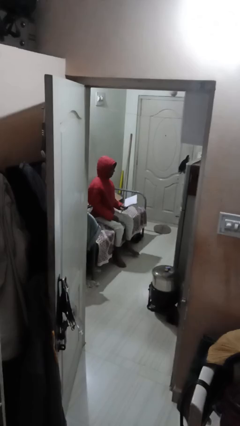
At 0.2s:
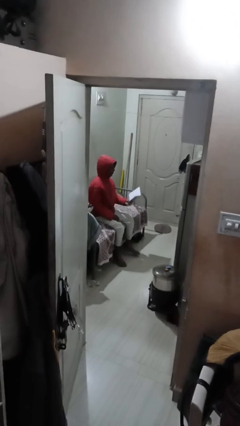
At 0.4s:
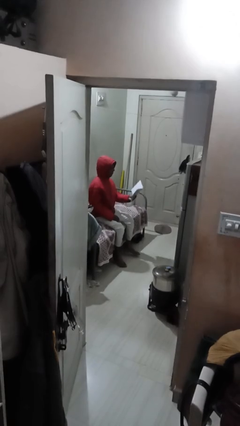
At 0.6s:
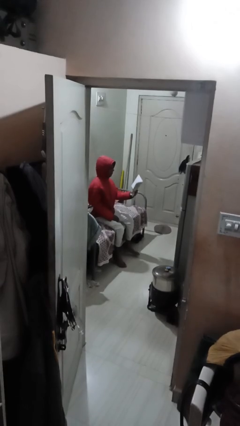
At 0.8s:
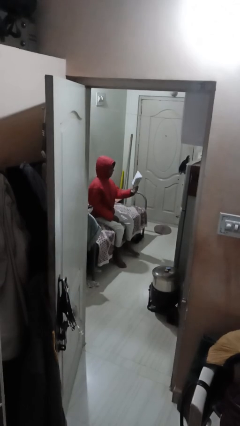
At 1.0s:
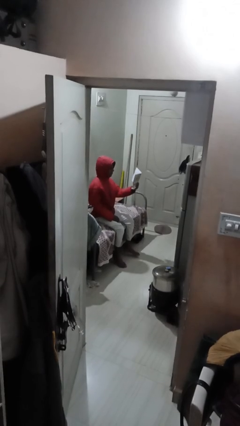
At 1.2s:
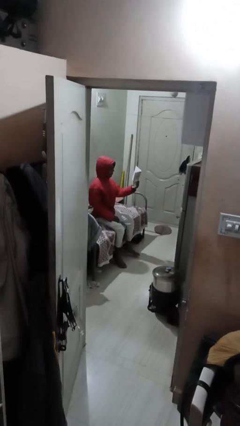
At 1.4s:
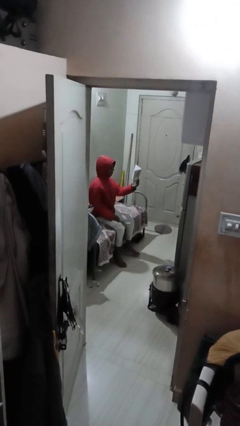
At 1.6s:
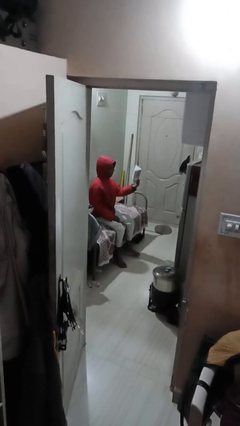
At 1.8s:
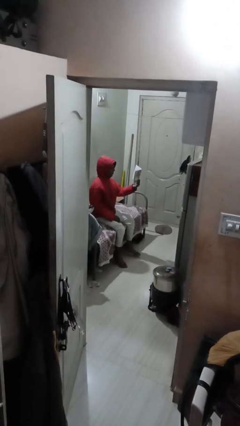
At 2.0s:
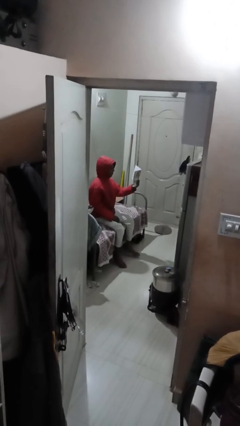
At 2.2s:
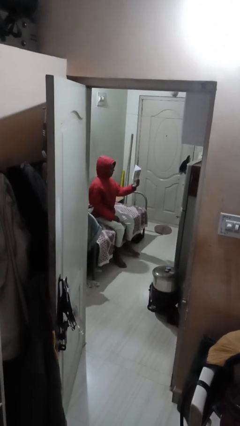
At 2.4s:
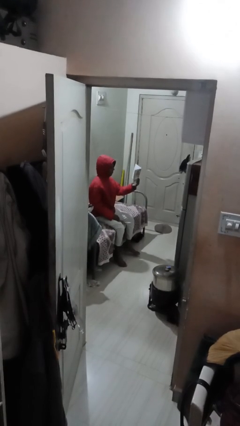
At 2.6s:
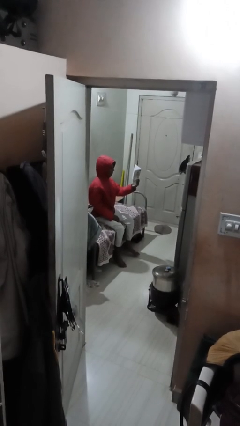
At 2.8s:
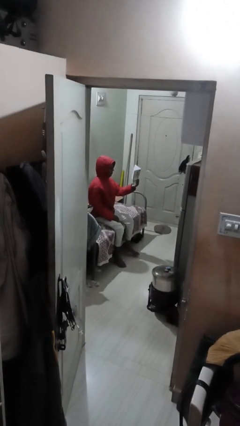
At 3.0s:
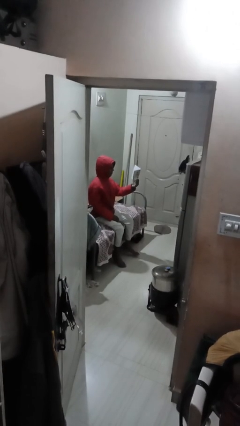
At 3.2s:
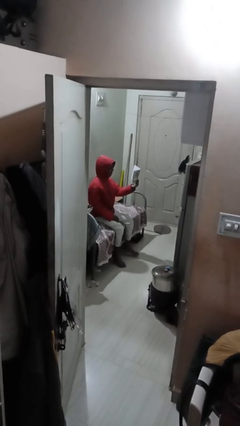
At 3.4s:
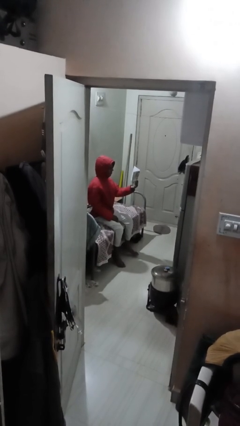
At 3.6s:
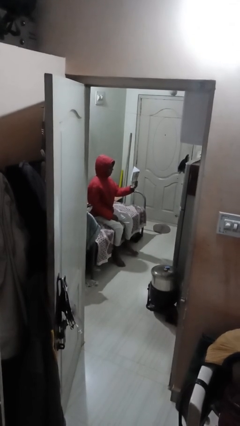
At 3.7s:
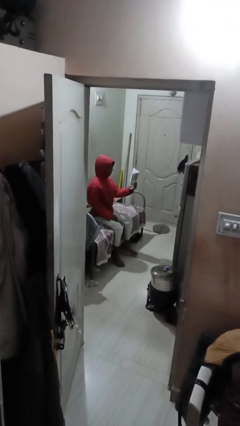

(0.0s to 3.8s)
person reads document

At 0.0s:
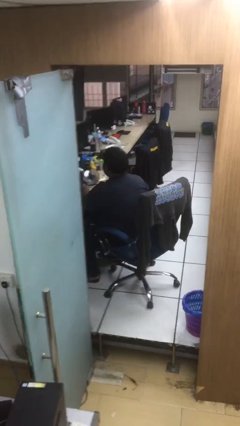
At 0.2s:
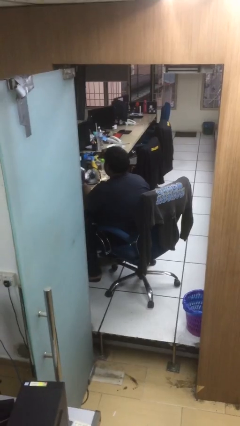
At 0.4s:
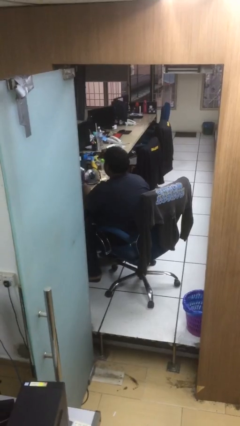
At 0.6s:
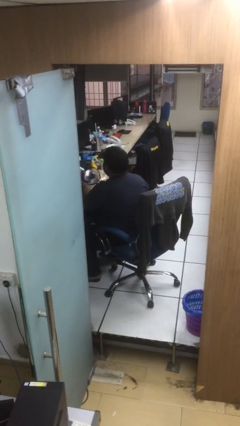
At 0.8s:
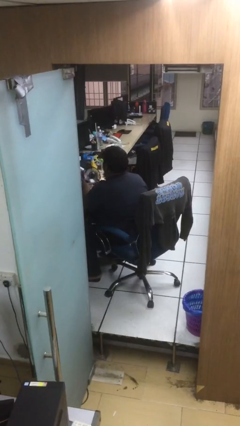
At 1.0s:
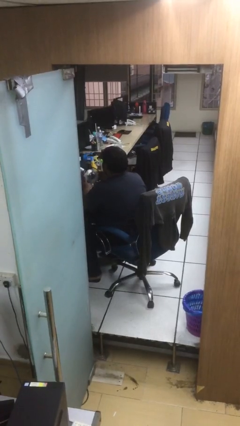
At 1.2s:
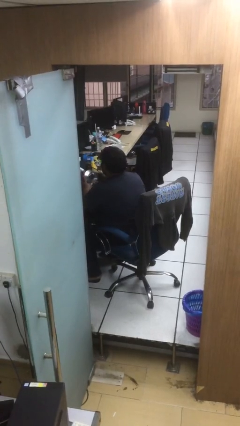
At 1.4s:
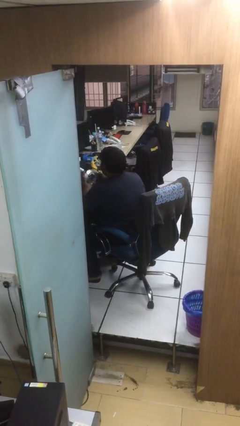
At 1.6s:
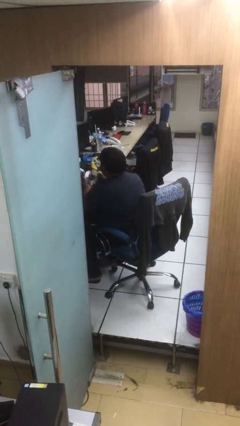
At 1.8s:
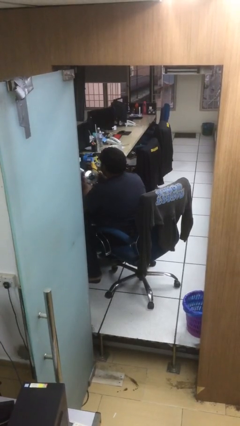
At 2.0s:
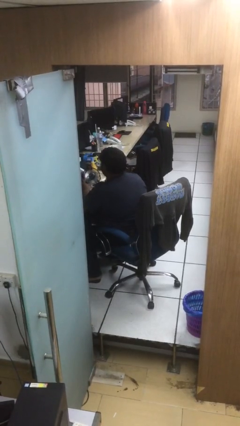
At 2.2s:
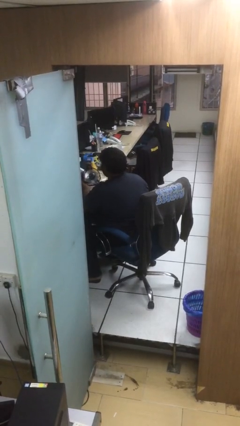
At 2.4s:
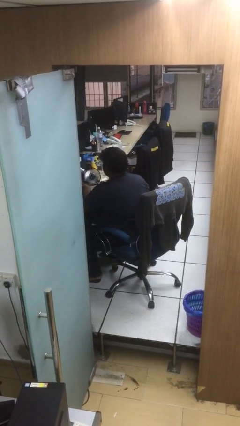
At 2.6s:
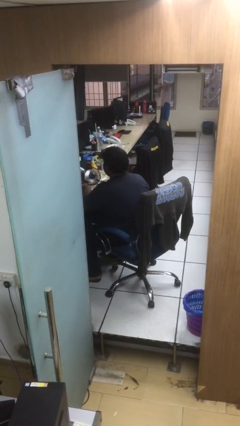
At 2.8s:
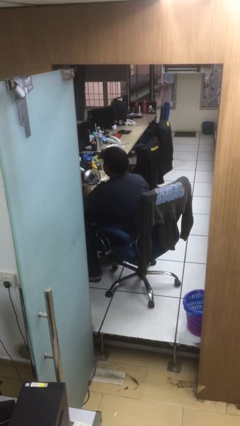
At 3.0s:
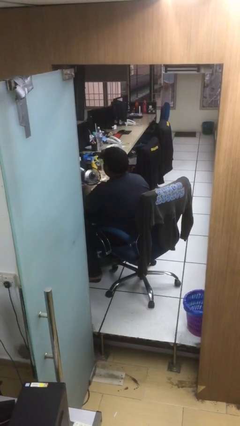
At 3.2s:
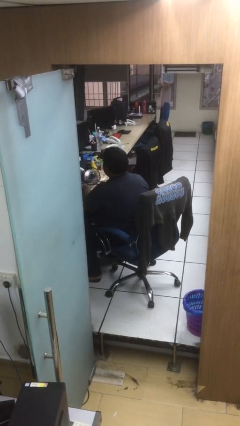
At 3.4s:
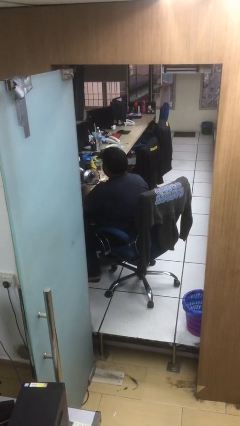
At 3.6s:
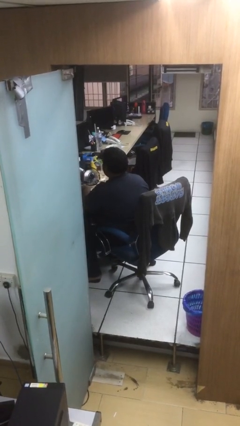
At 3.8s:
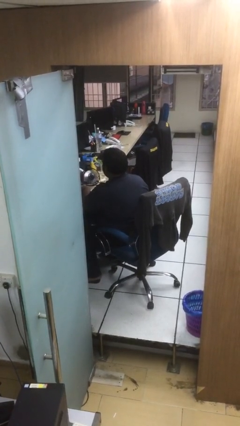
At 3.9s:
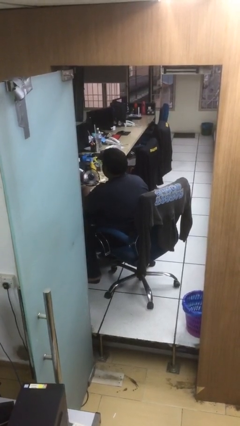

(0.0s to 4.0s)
person turns on fan

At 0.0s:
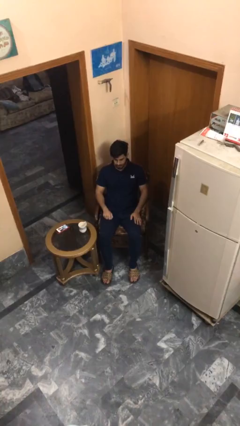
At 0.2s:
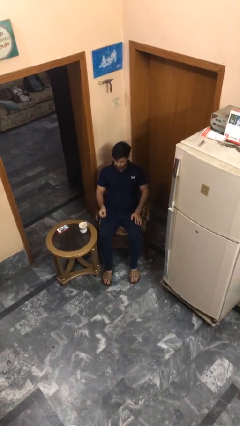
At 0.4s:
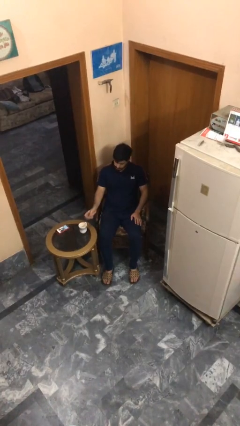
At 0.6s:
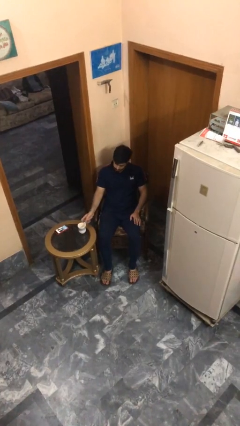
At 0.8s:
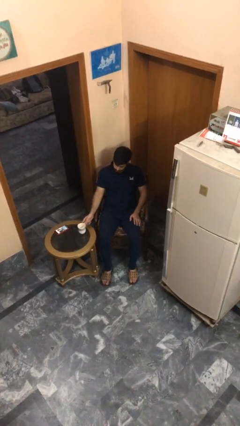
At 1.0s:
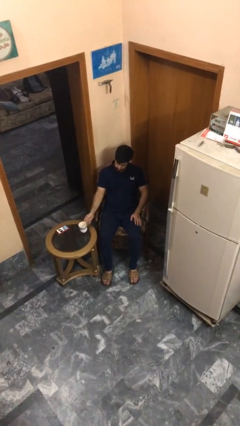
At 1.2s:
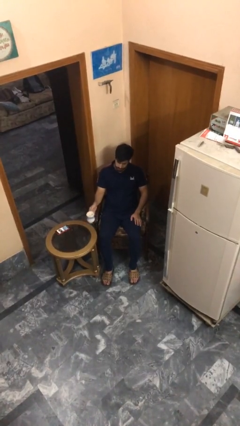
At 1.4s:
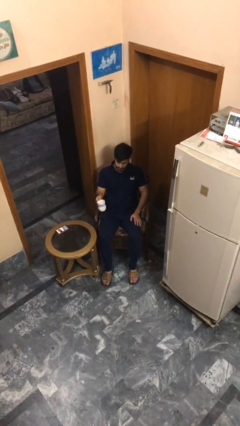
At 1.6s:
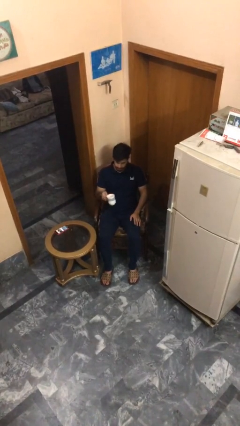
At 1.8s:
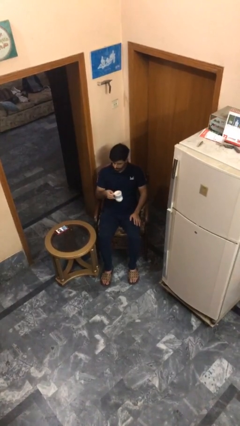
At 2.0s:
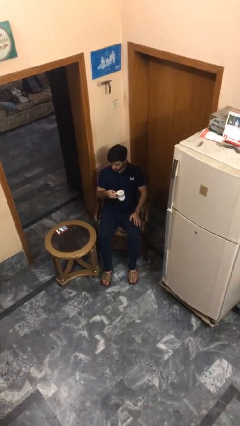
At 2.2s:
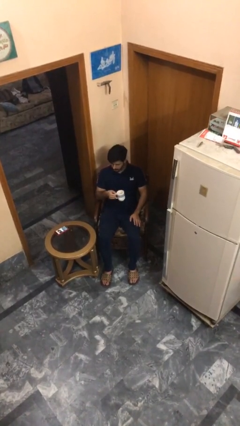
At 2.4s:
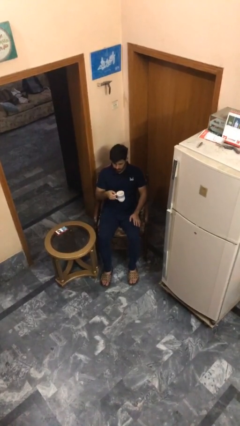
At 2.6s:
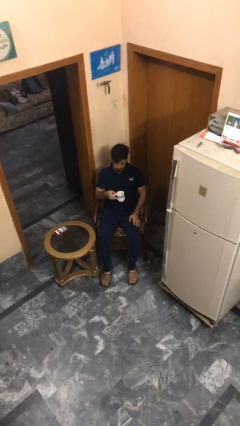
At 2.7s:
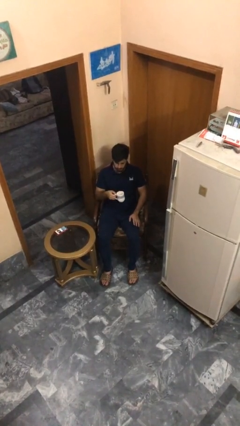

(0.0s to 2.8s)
person picks up object from table

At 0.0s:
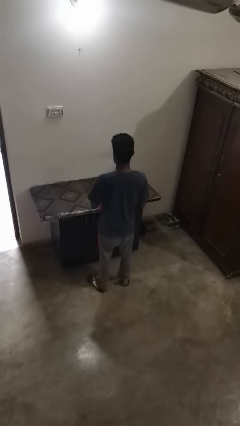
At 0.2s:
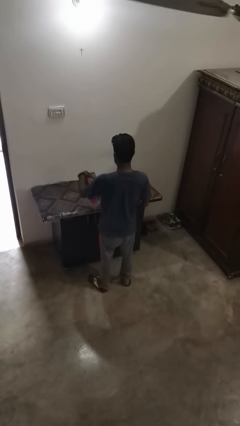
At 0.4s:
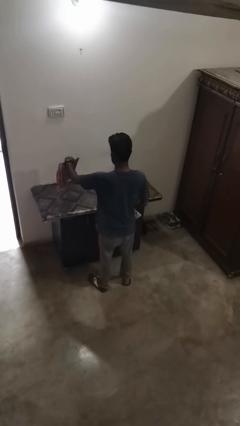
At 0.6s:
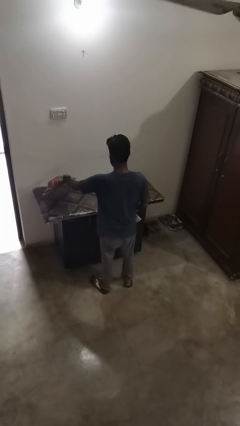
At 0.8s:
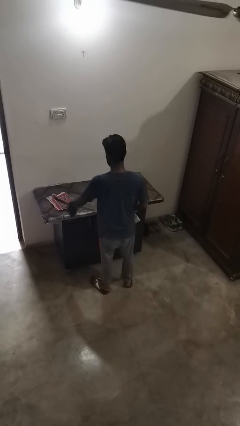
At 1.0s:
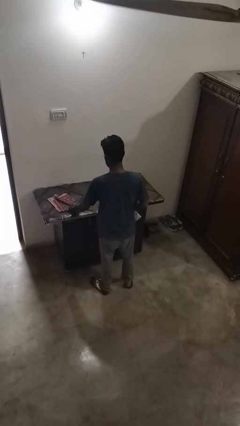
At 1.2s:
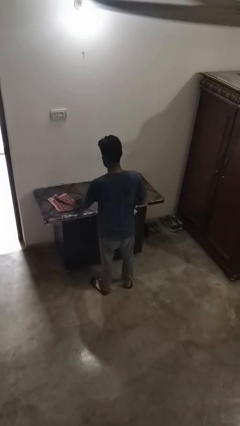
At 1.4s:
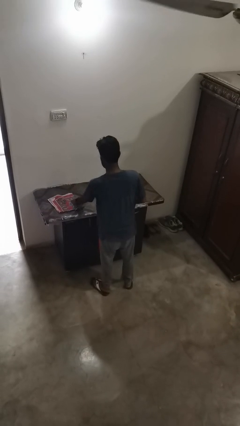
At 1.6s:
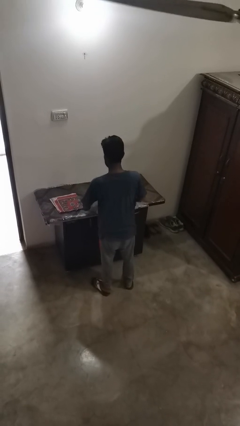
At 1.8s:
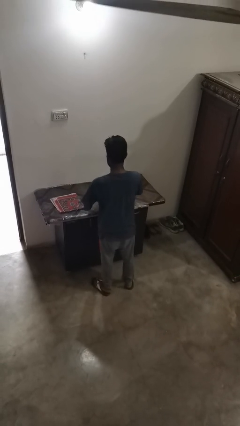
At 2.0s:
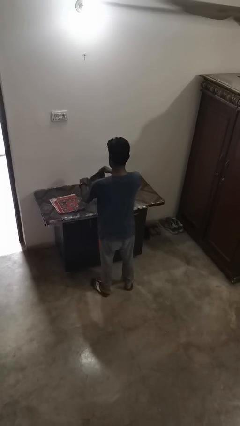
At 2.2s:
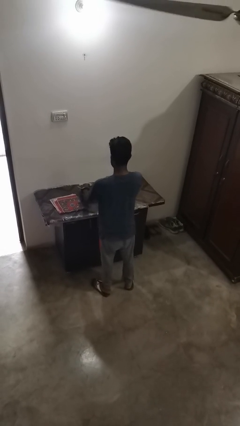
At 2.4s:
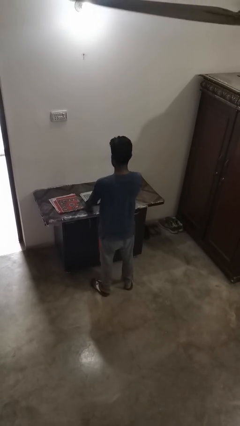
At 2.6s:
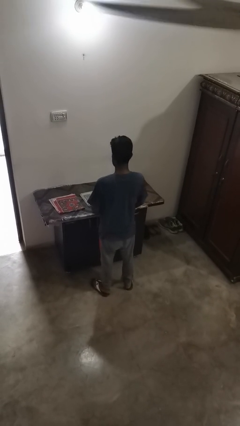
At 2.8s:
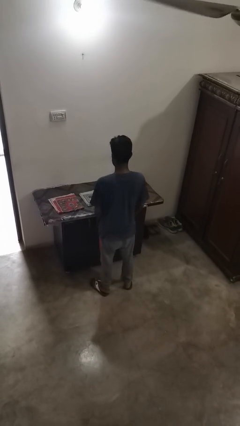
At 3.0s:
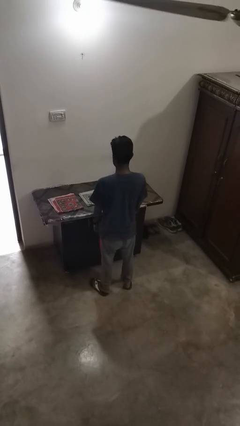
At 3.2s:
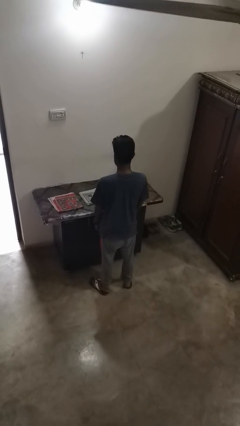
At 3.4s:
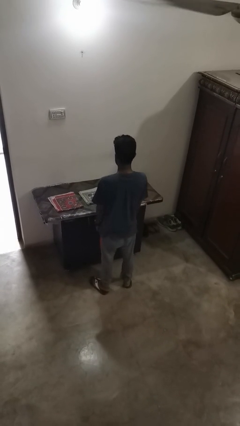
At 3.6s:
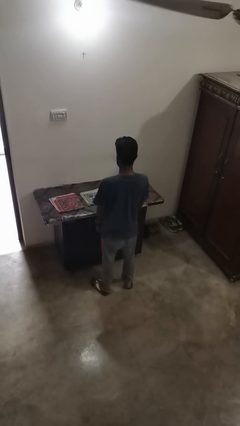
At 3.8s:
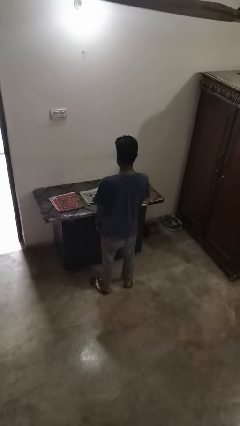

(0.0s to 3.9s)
person spreads tablecloth

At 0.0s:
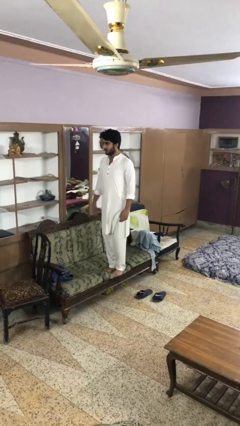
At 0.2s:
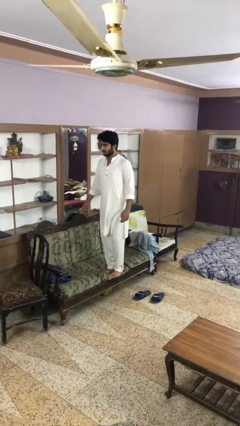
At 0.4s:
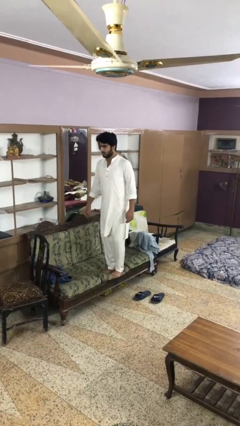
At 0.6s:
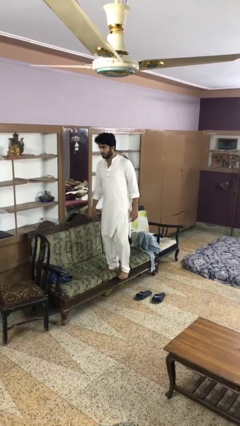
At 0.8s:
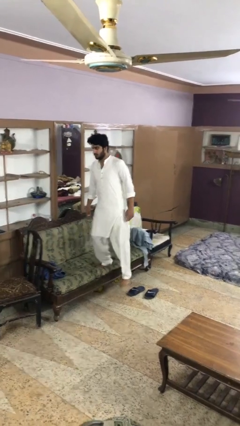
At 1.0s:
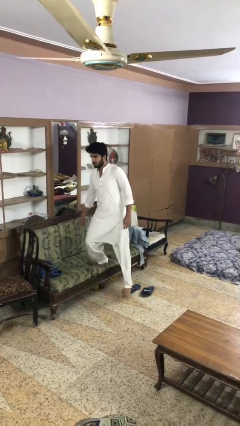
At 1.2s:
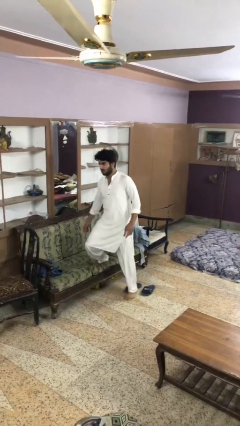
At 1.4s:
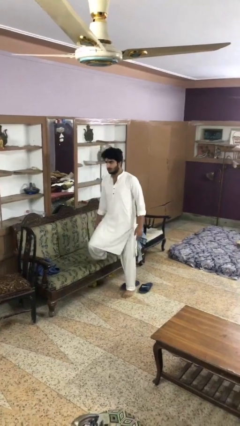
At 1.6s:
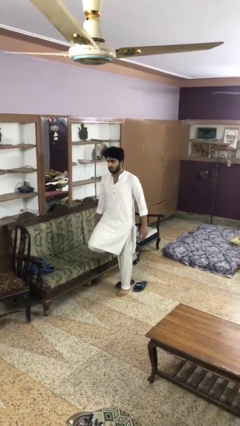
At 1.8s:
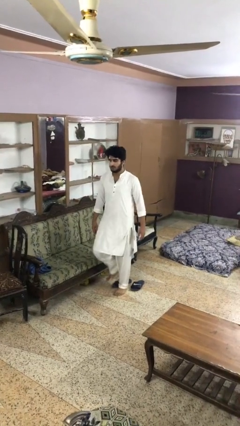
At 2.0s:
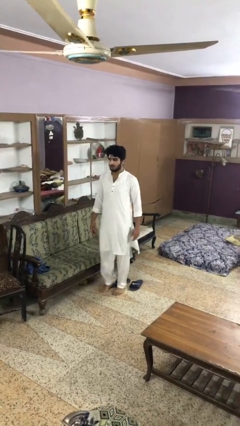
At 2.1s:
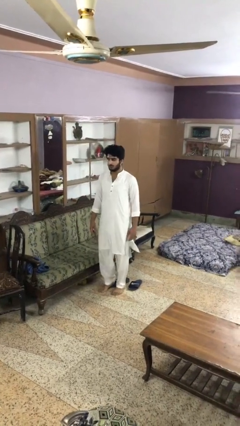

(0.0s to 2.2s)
person climbs off couch

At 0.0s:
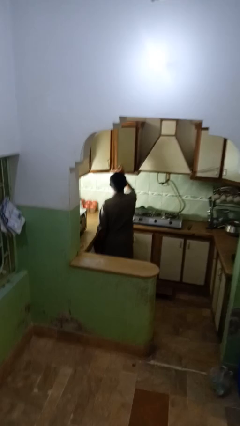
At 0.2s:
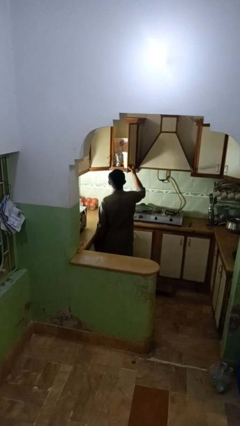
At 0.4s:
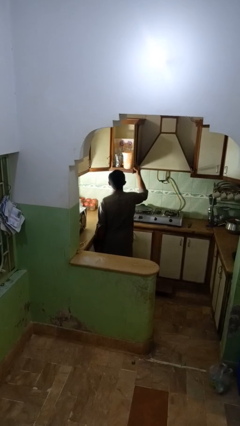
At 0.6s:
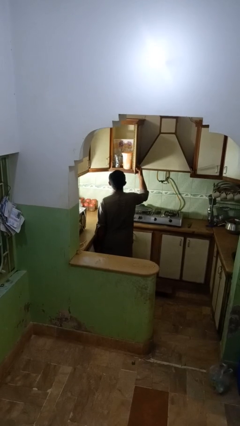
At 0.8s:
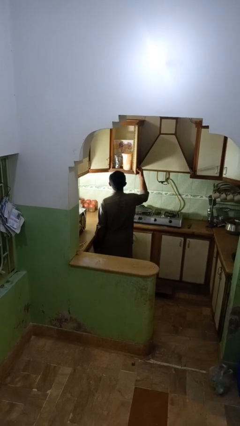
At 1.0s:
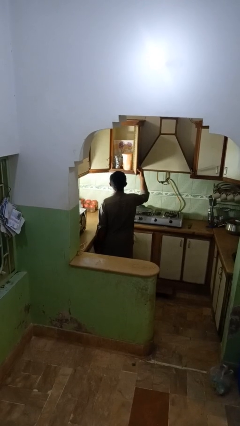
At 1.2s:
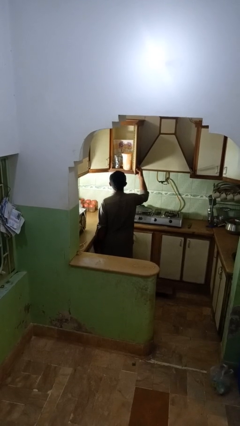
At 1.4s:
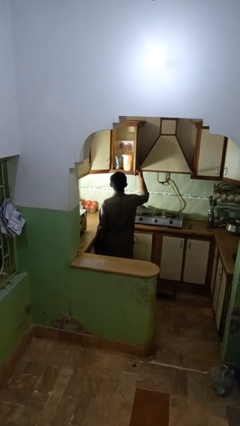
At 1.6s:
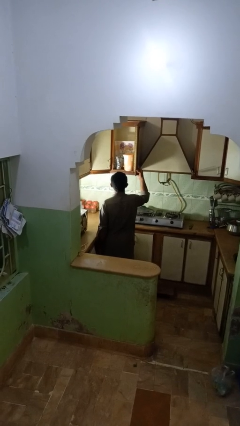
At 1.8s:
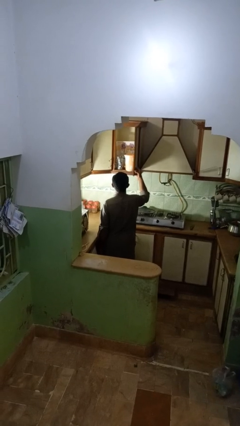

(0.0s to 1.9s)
person opens kitchen drawer
